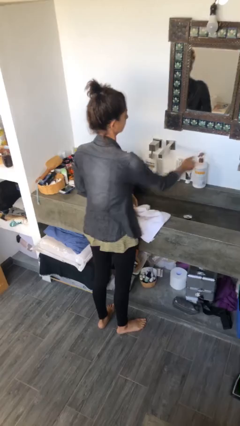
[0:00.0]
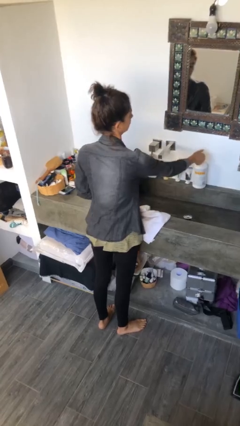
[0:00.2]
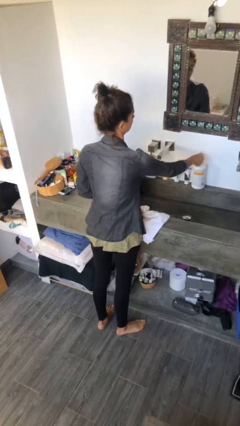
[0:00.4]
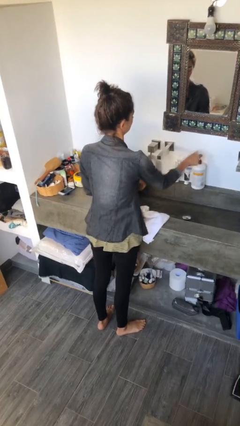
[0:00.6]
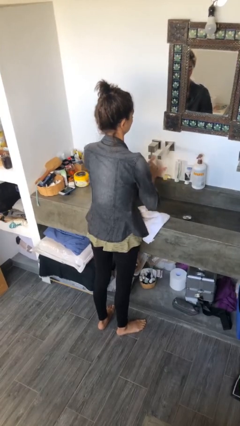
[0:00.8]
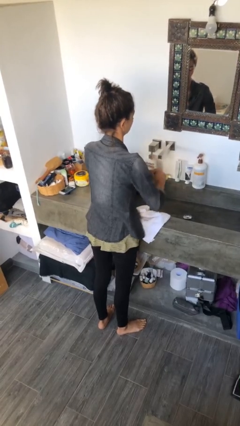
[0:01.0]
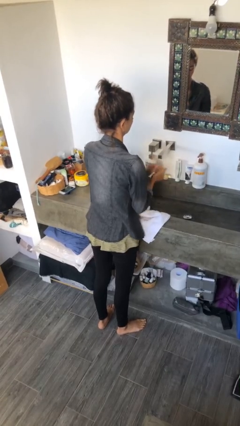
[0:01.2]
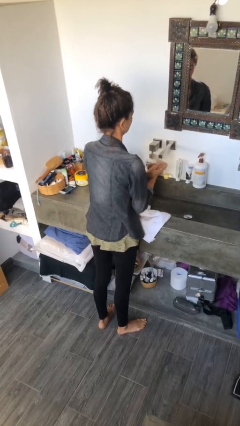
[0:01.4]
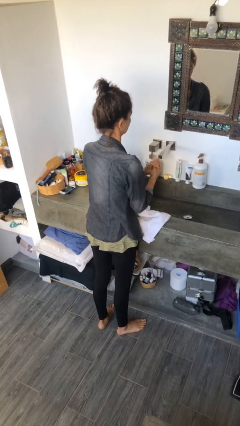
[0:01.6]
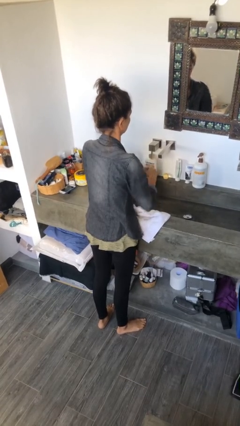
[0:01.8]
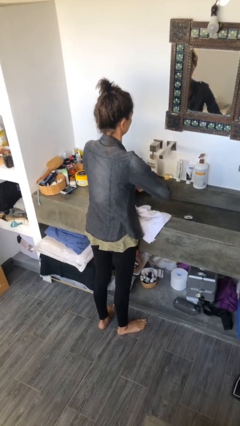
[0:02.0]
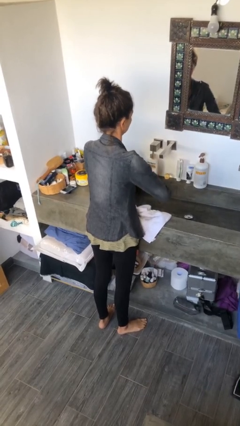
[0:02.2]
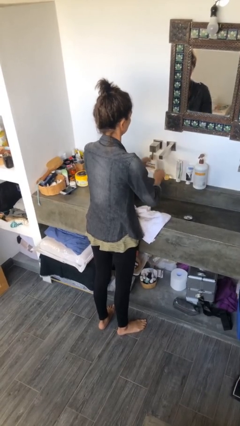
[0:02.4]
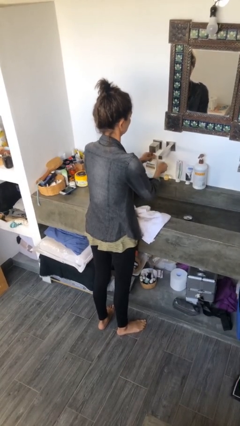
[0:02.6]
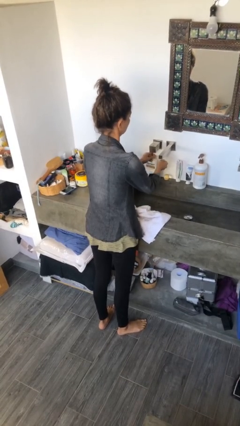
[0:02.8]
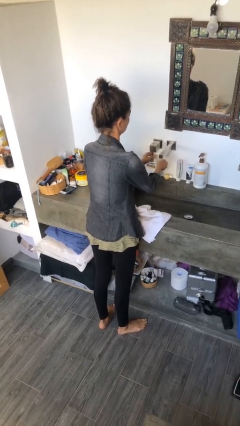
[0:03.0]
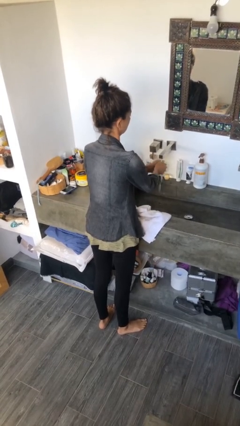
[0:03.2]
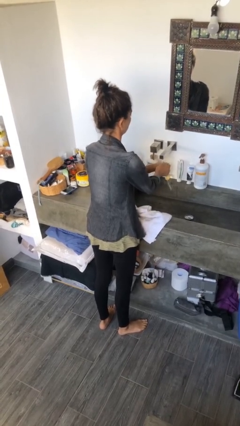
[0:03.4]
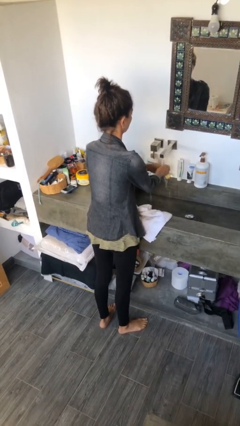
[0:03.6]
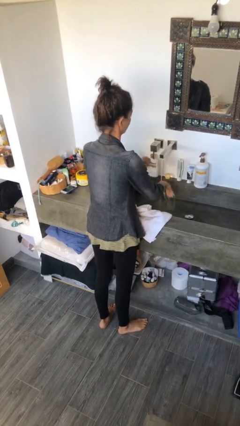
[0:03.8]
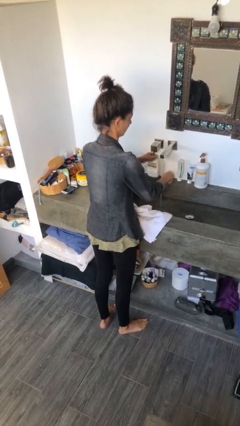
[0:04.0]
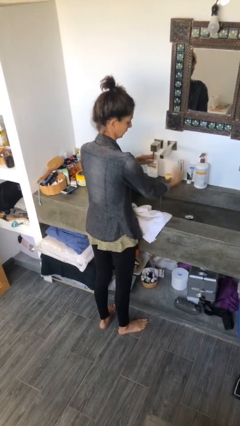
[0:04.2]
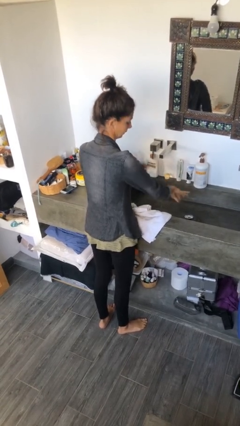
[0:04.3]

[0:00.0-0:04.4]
person washes hands

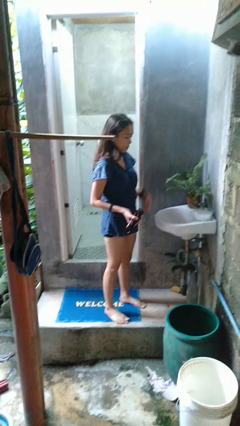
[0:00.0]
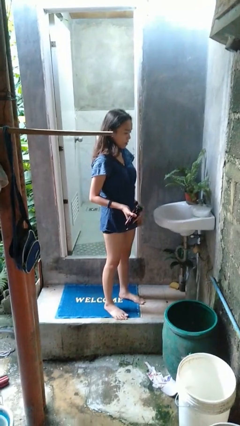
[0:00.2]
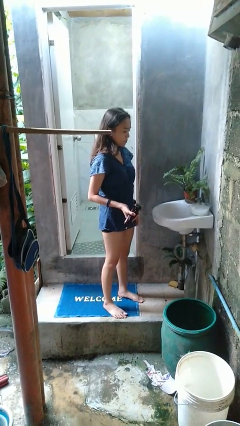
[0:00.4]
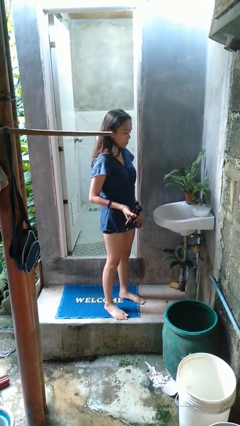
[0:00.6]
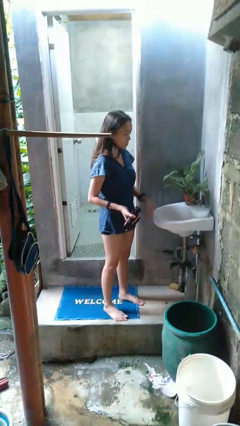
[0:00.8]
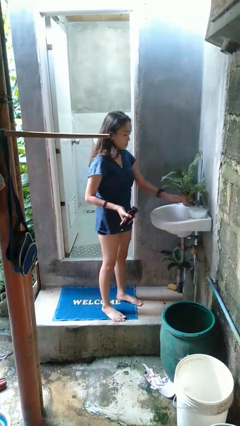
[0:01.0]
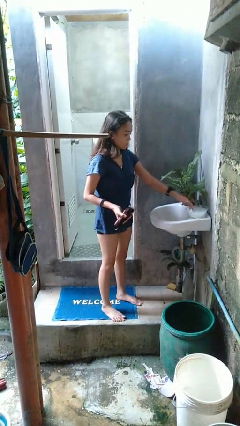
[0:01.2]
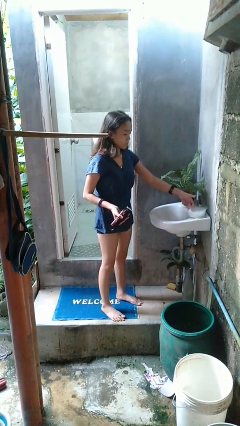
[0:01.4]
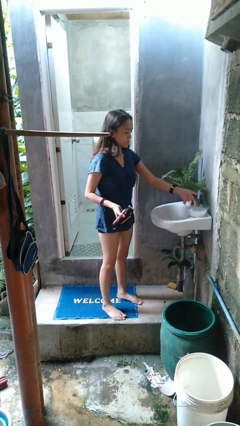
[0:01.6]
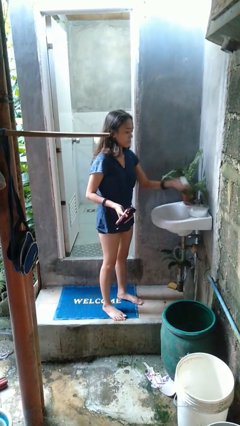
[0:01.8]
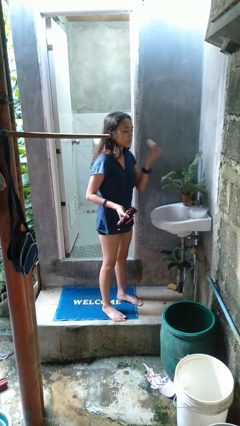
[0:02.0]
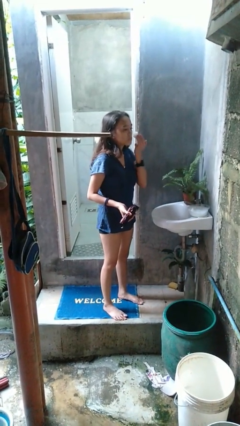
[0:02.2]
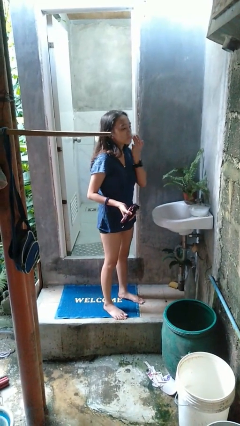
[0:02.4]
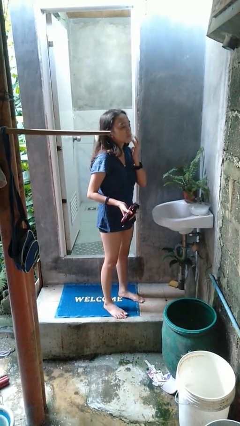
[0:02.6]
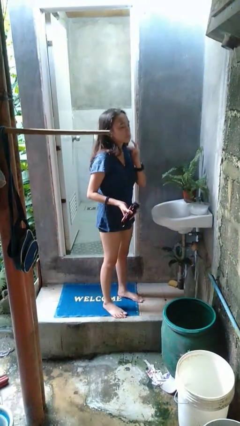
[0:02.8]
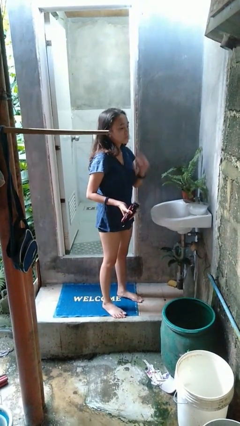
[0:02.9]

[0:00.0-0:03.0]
person applies shaving cream

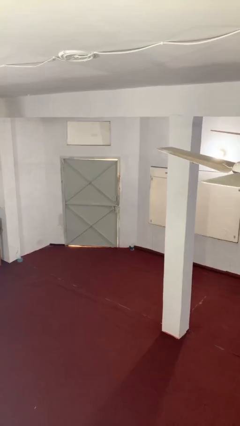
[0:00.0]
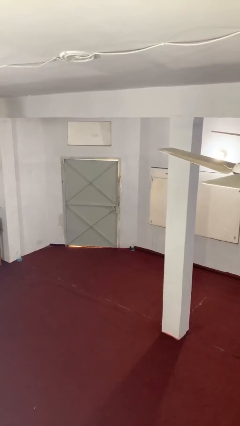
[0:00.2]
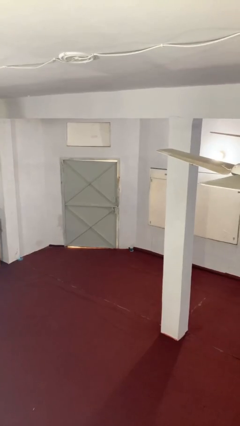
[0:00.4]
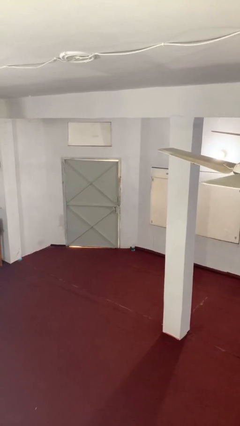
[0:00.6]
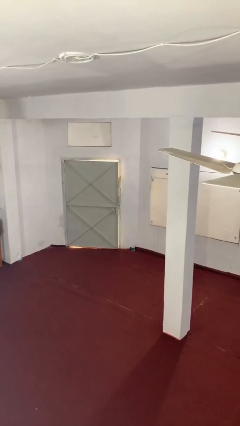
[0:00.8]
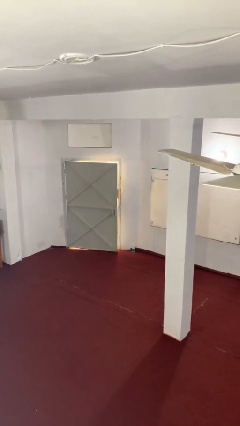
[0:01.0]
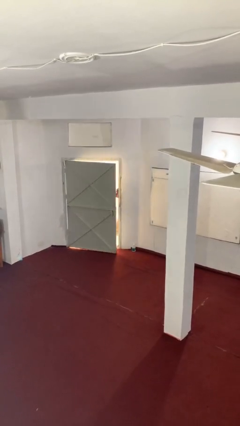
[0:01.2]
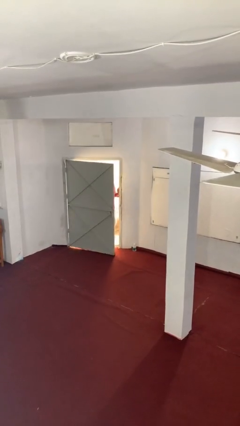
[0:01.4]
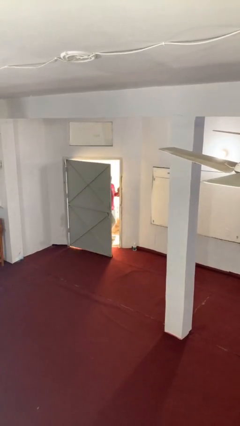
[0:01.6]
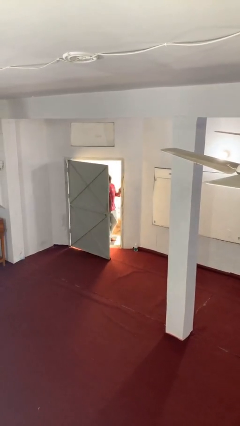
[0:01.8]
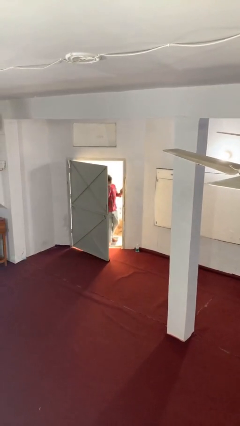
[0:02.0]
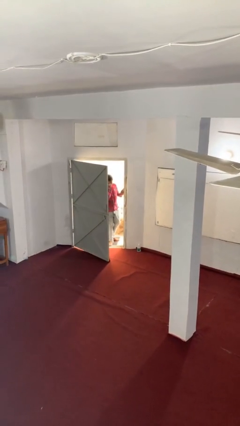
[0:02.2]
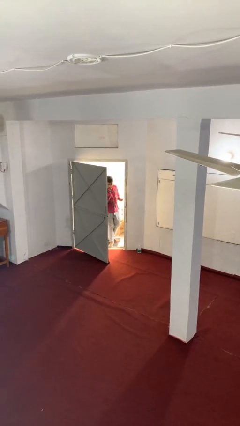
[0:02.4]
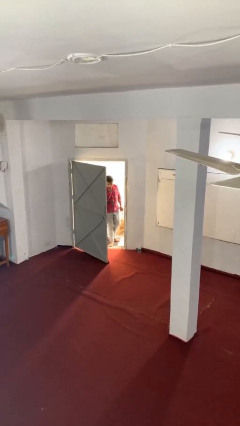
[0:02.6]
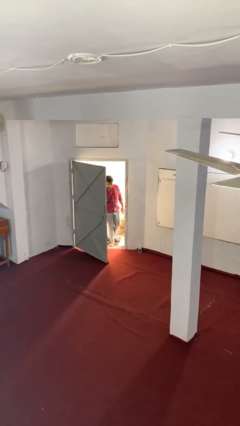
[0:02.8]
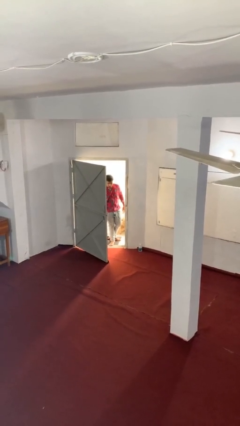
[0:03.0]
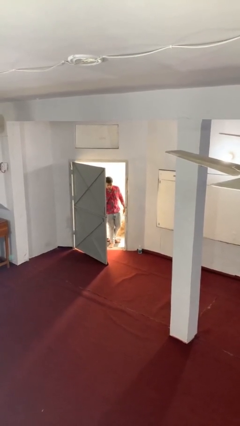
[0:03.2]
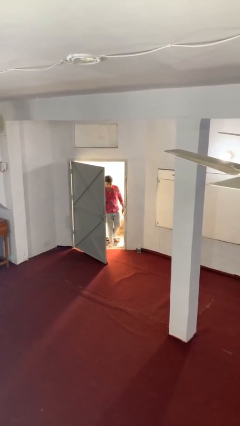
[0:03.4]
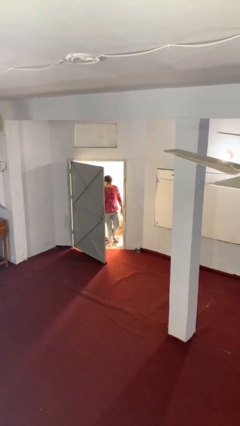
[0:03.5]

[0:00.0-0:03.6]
person opens facility door

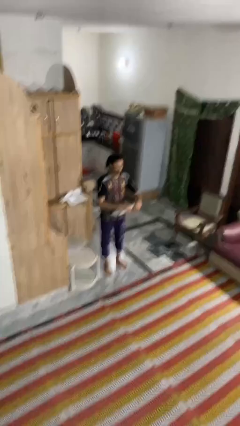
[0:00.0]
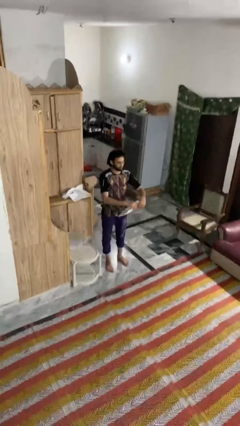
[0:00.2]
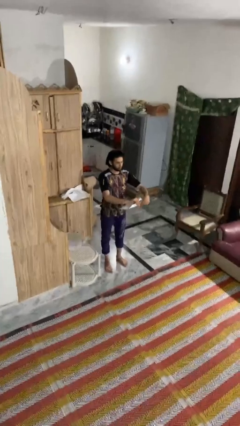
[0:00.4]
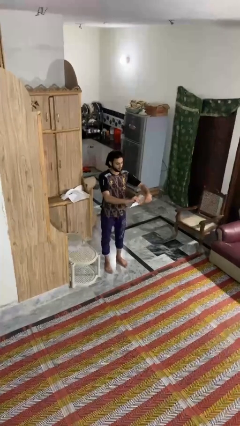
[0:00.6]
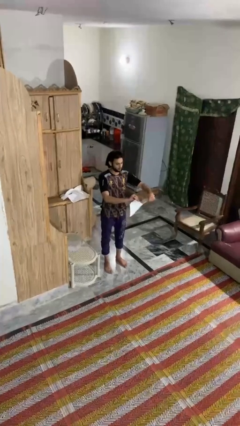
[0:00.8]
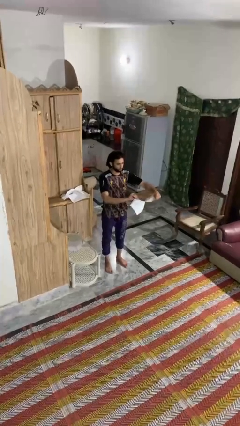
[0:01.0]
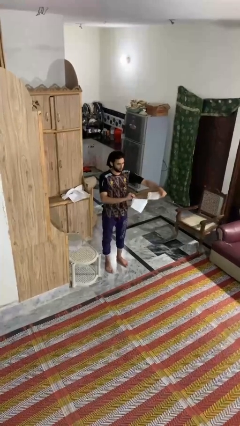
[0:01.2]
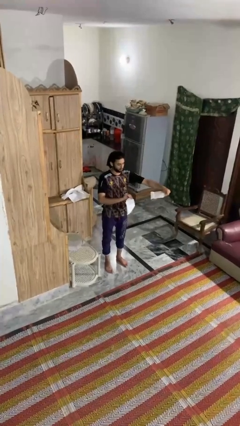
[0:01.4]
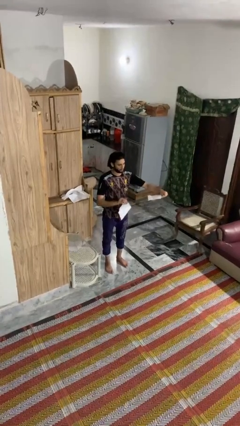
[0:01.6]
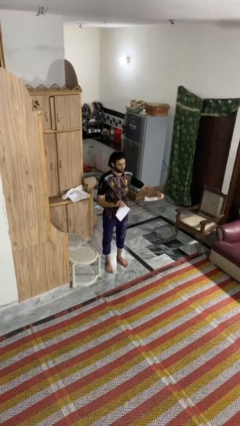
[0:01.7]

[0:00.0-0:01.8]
person tears paper

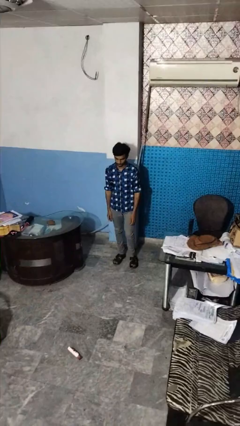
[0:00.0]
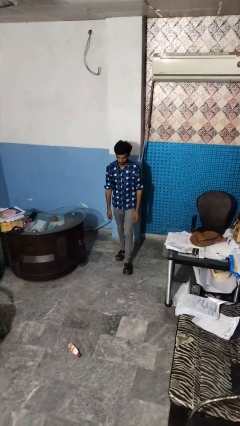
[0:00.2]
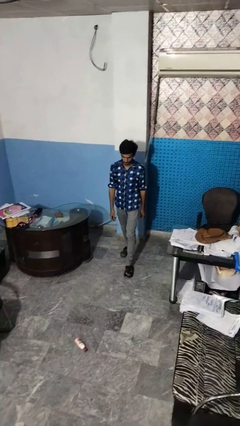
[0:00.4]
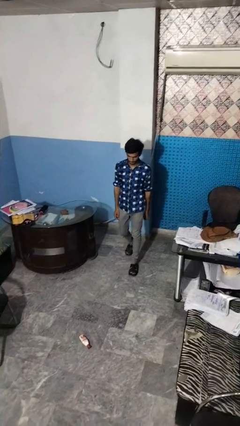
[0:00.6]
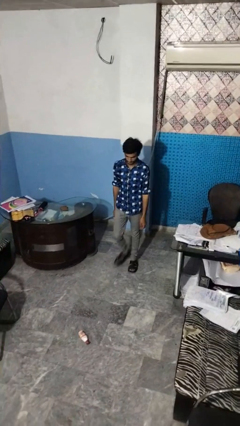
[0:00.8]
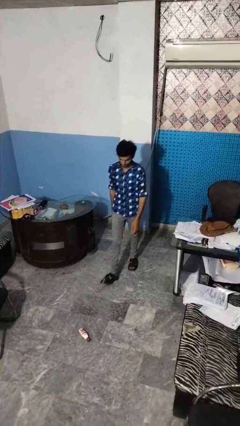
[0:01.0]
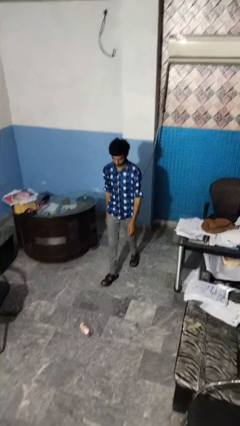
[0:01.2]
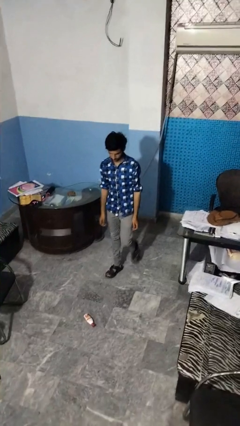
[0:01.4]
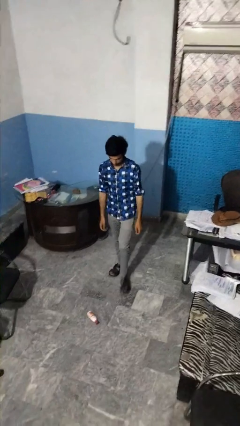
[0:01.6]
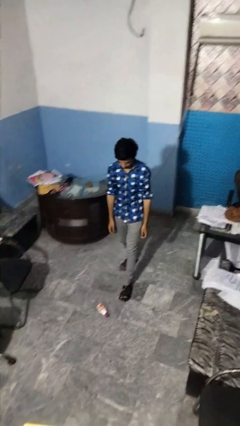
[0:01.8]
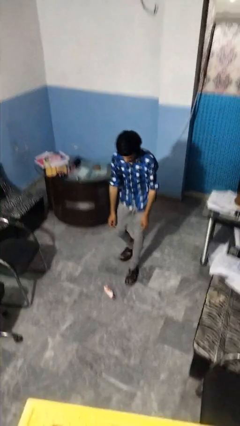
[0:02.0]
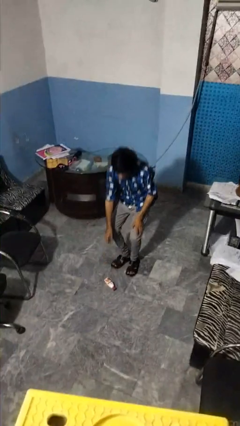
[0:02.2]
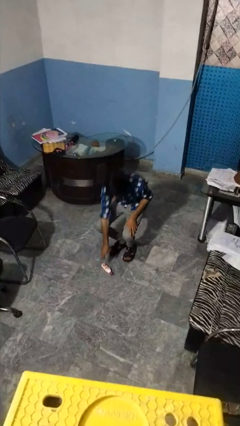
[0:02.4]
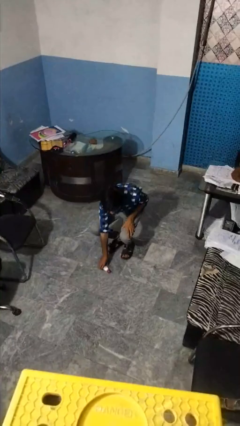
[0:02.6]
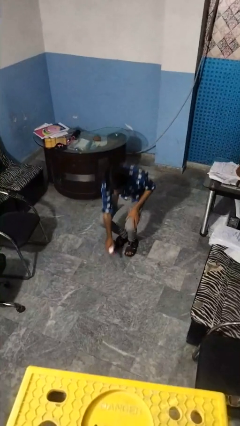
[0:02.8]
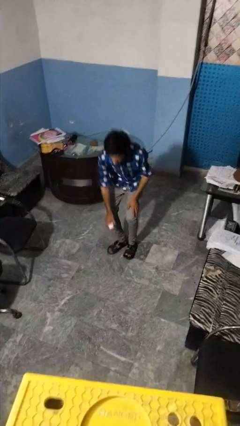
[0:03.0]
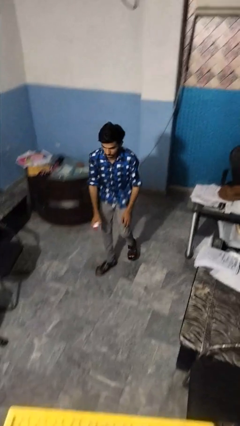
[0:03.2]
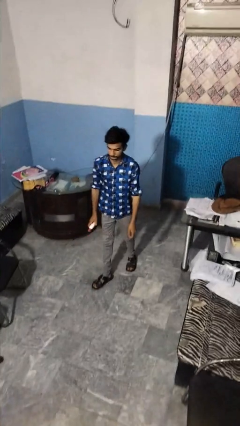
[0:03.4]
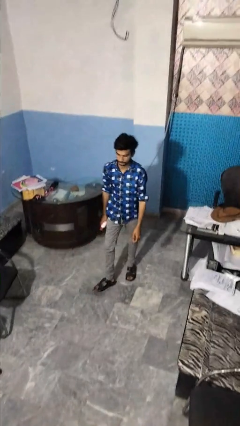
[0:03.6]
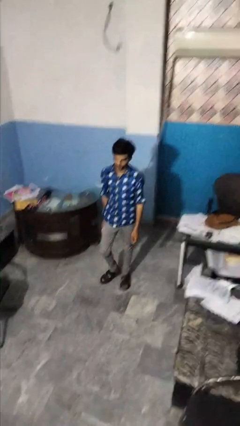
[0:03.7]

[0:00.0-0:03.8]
person picks up object from floor

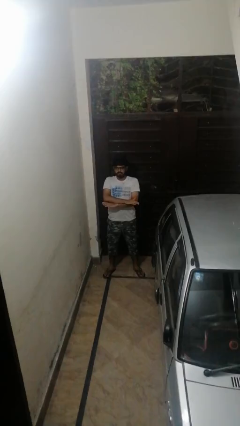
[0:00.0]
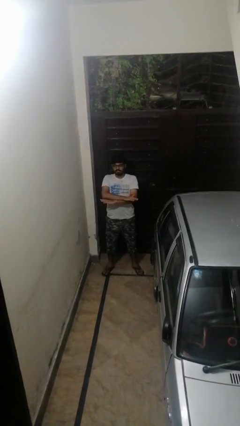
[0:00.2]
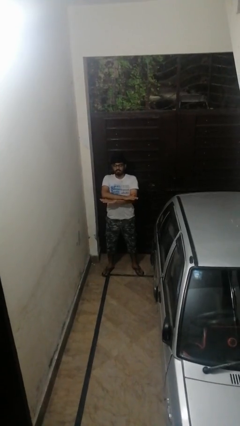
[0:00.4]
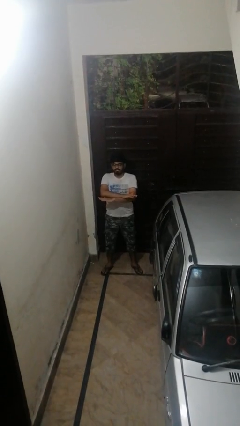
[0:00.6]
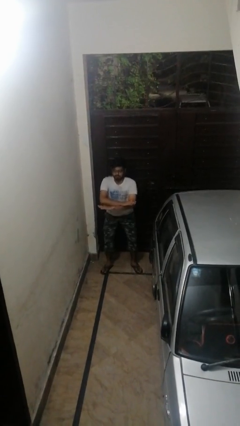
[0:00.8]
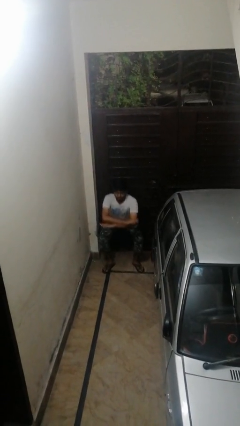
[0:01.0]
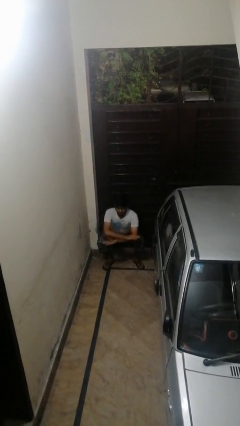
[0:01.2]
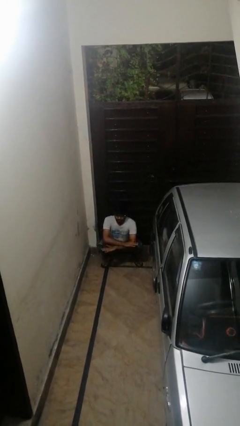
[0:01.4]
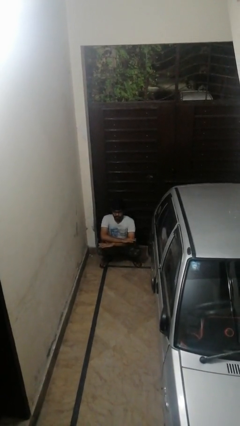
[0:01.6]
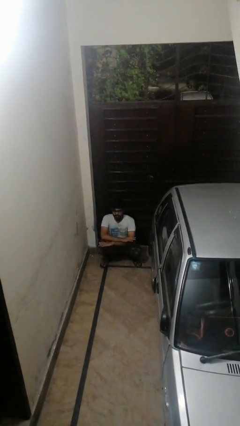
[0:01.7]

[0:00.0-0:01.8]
person squats
